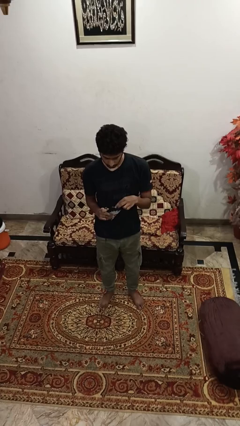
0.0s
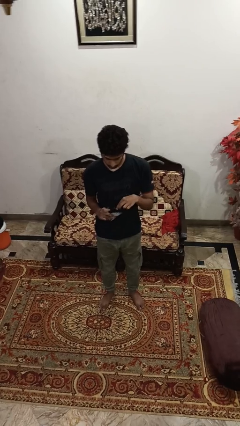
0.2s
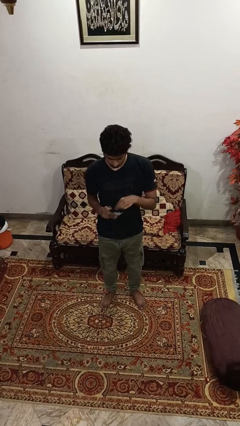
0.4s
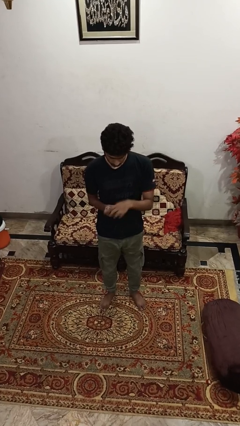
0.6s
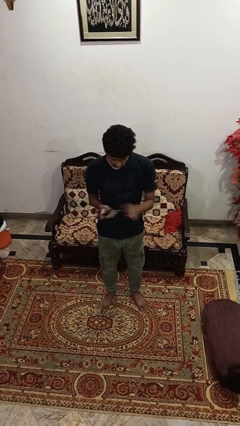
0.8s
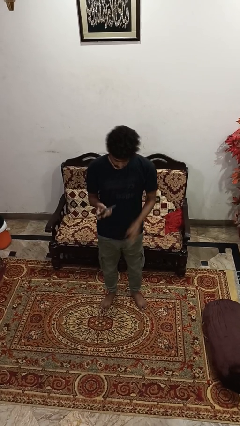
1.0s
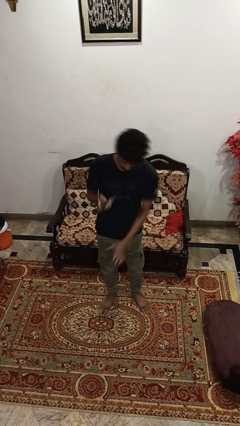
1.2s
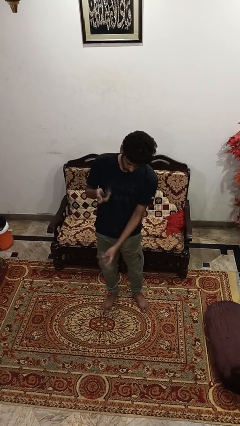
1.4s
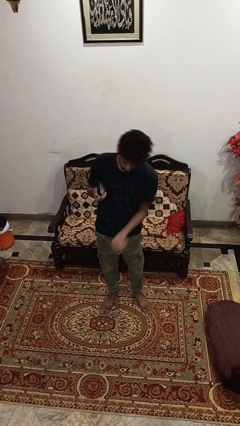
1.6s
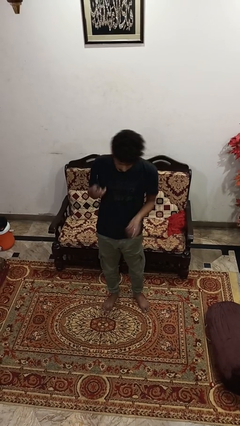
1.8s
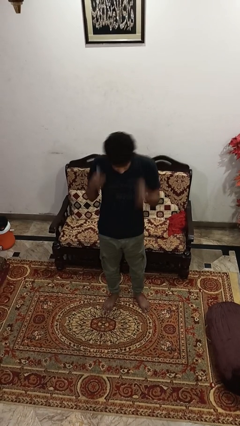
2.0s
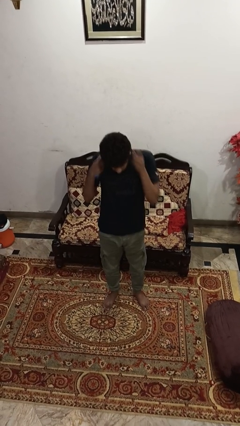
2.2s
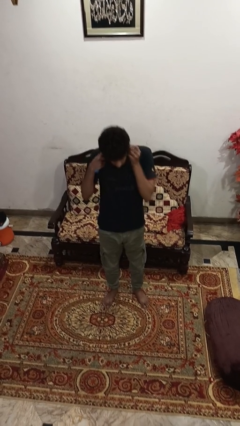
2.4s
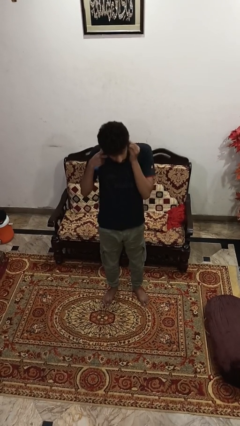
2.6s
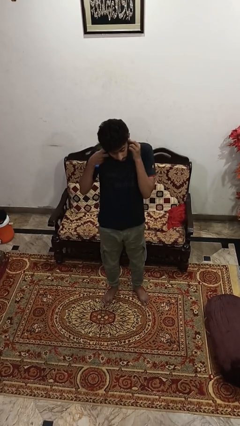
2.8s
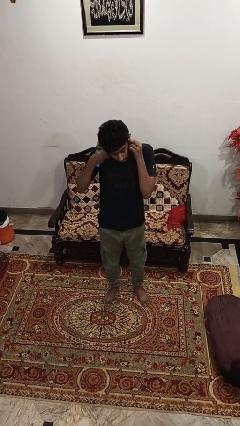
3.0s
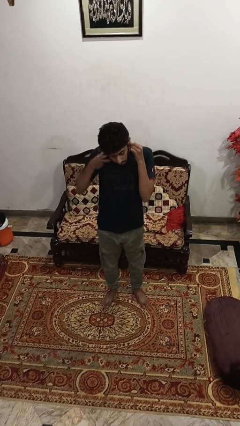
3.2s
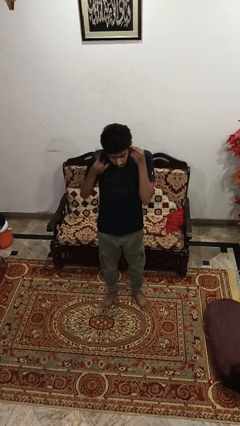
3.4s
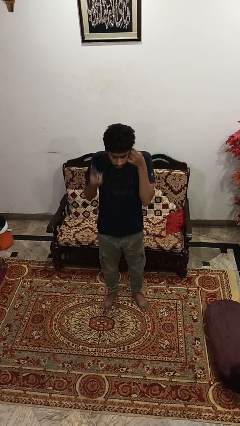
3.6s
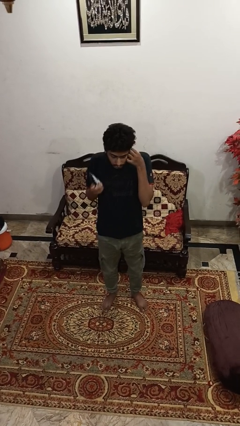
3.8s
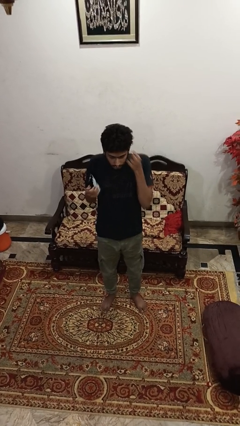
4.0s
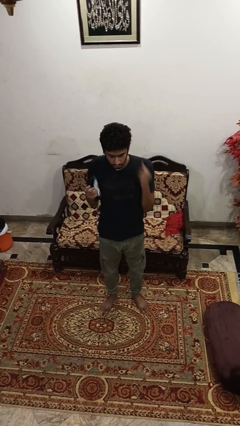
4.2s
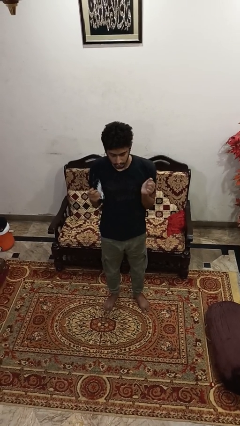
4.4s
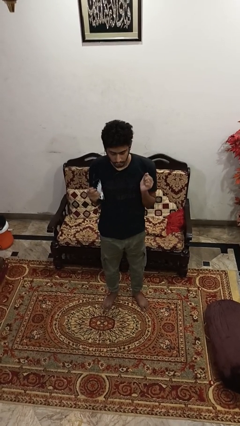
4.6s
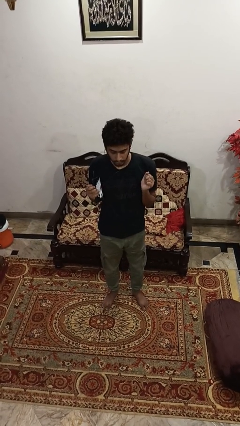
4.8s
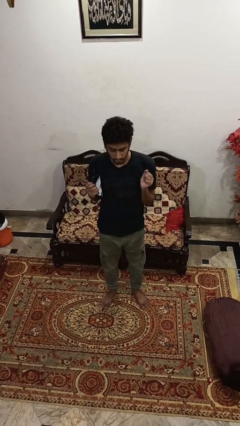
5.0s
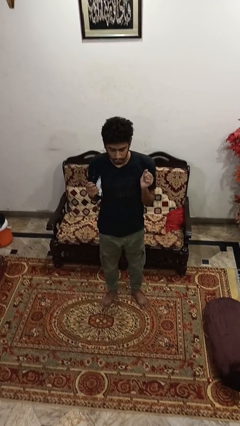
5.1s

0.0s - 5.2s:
person puts on headphones

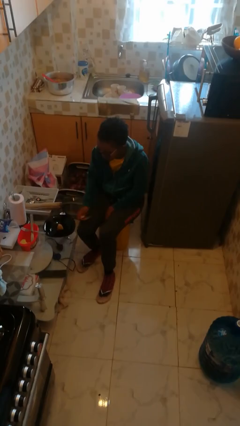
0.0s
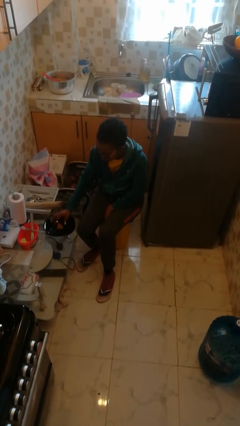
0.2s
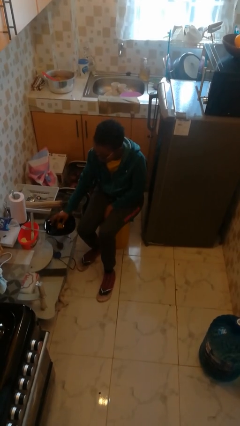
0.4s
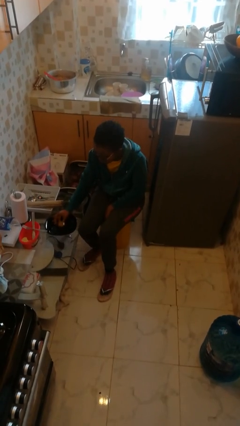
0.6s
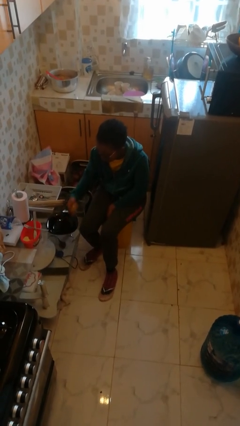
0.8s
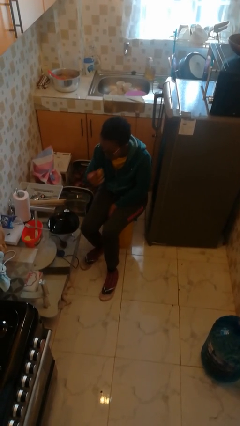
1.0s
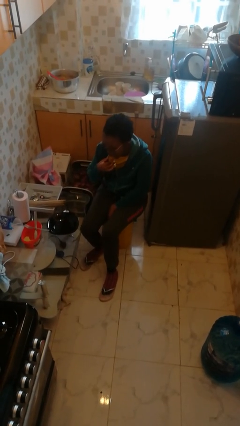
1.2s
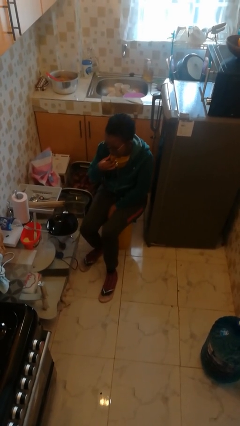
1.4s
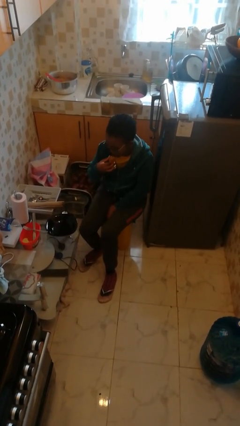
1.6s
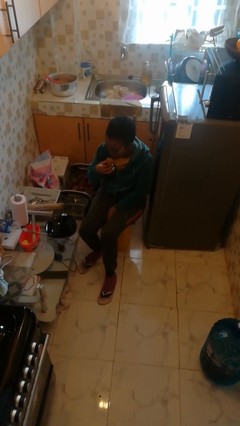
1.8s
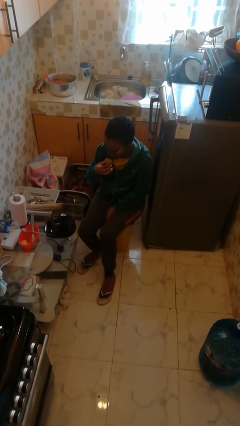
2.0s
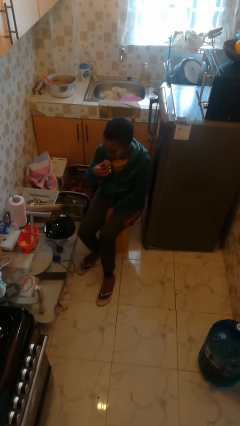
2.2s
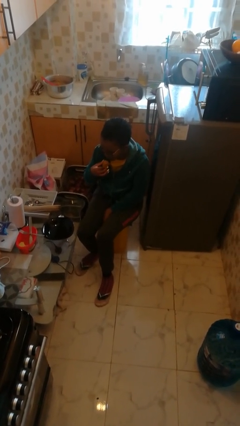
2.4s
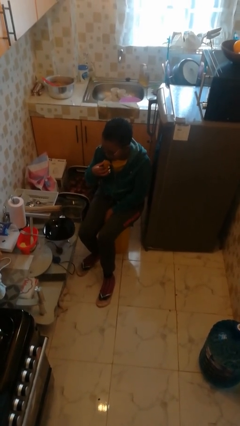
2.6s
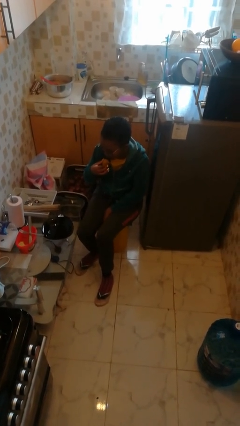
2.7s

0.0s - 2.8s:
person eats with hands

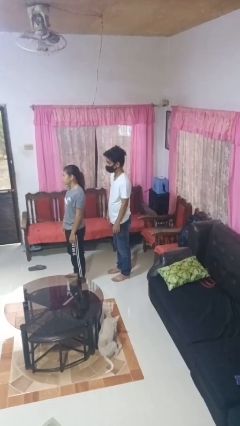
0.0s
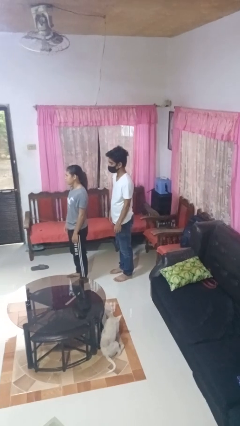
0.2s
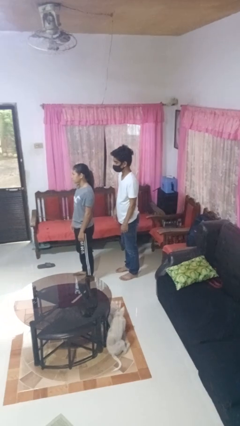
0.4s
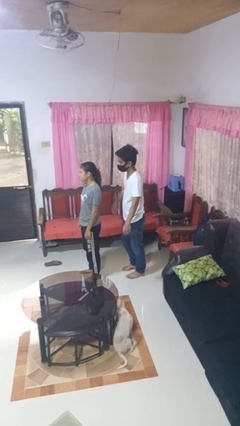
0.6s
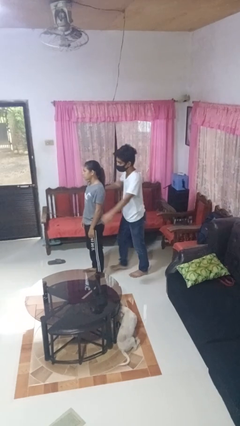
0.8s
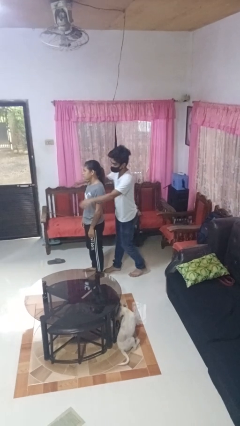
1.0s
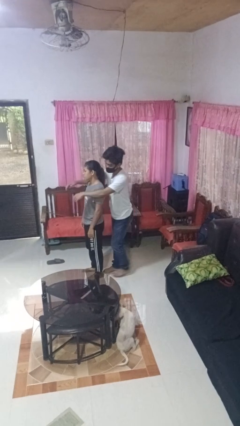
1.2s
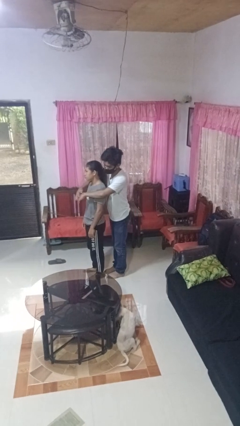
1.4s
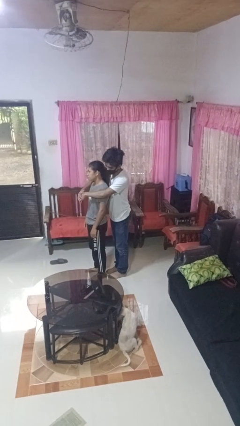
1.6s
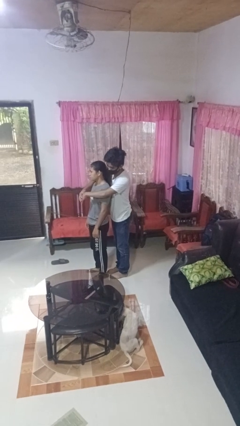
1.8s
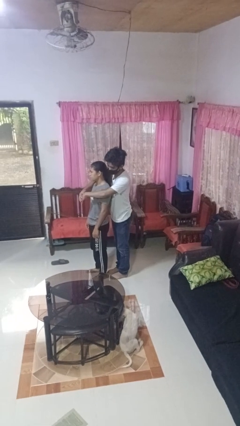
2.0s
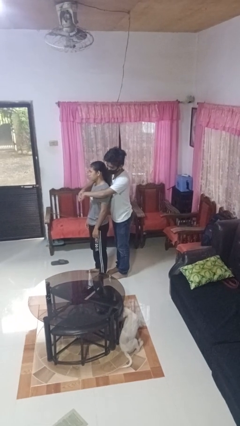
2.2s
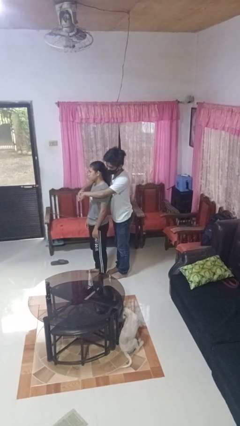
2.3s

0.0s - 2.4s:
person hugs person from behind

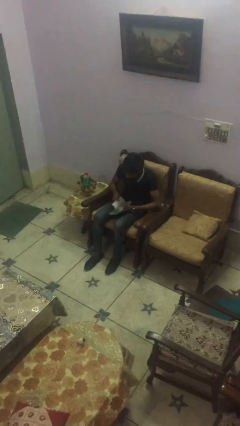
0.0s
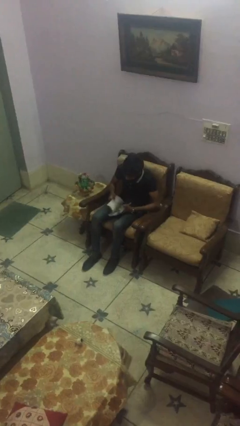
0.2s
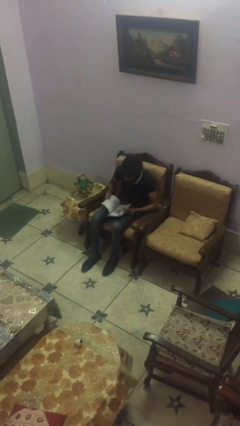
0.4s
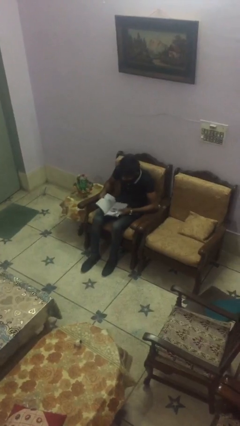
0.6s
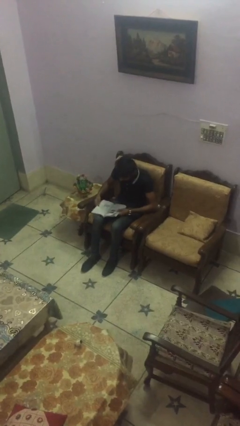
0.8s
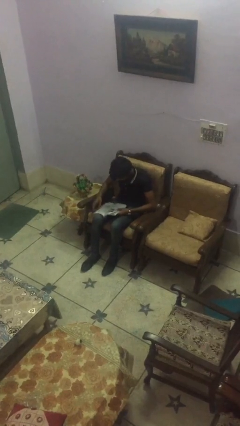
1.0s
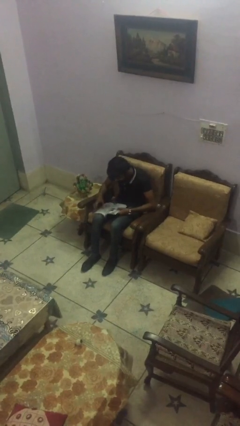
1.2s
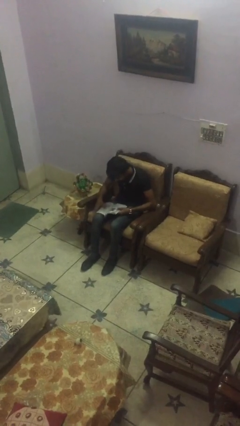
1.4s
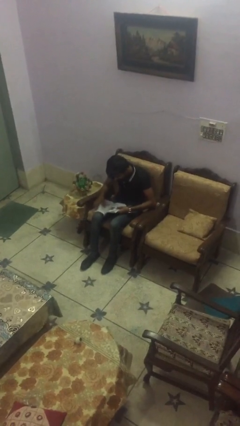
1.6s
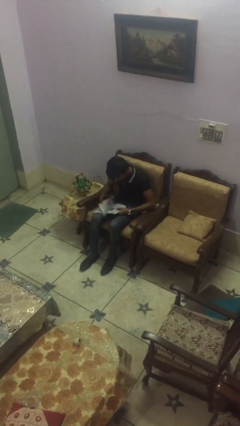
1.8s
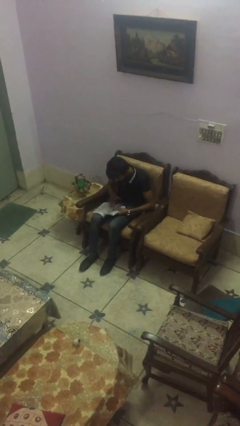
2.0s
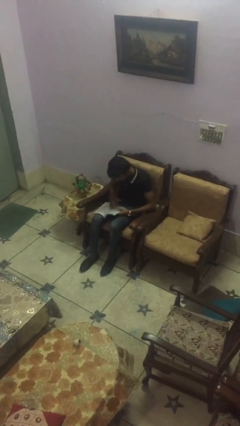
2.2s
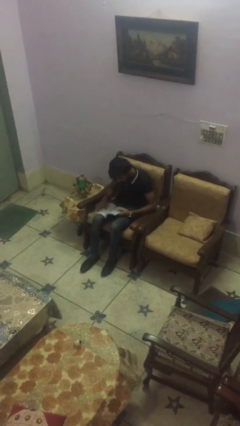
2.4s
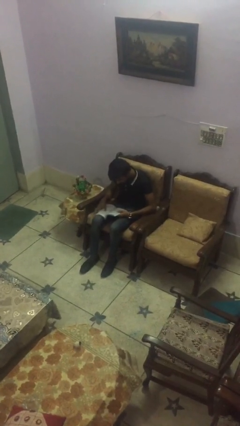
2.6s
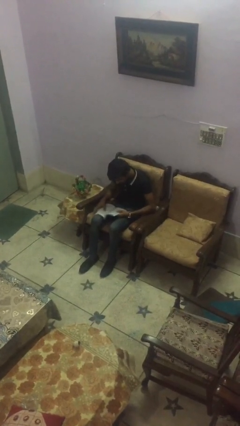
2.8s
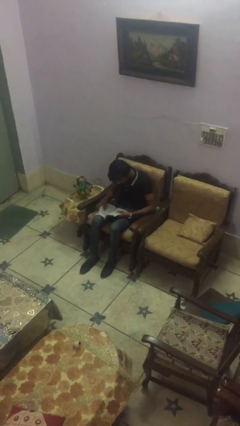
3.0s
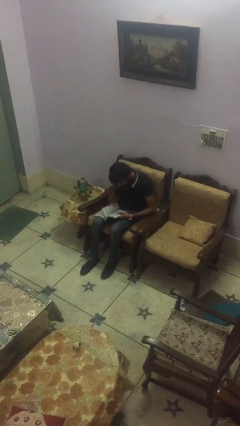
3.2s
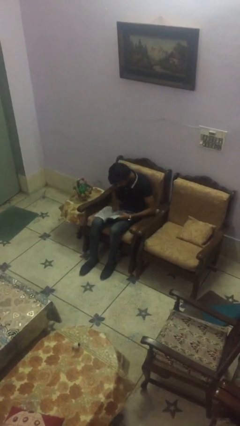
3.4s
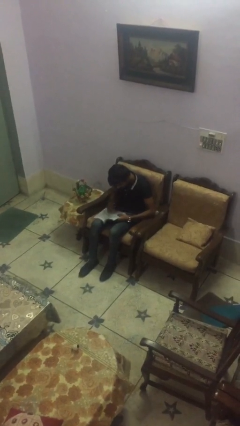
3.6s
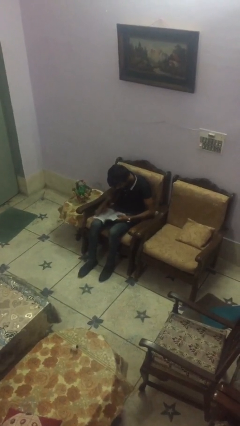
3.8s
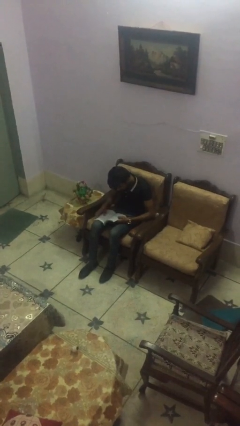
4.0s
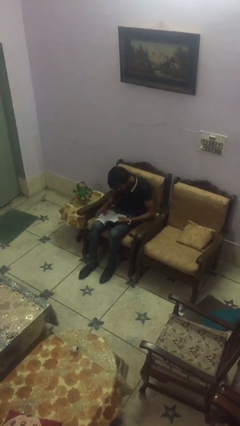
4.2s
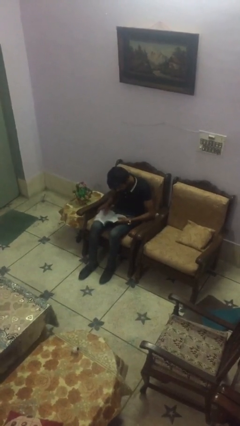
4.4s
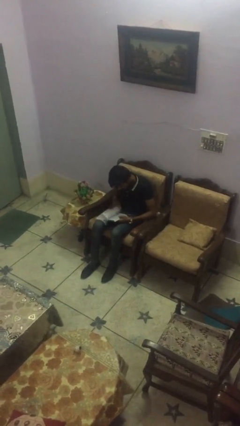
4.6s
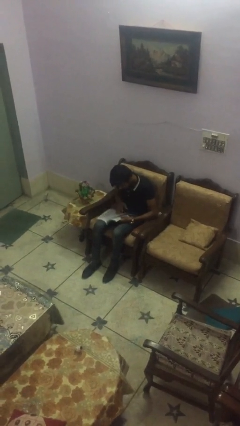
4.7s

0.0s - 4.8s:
person reads document

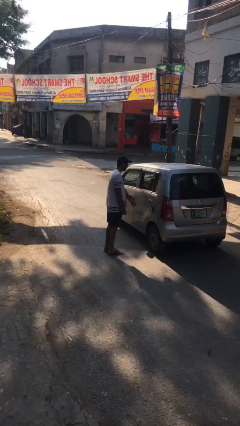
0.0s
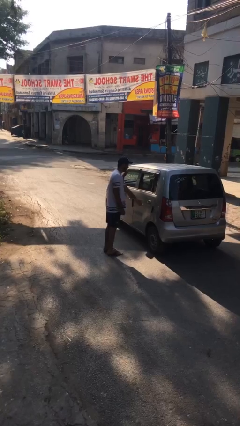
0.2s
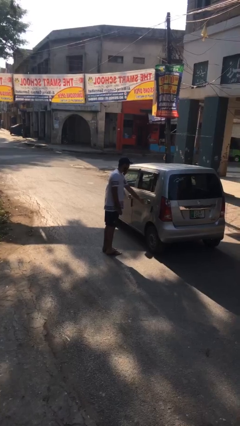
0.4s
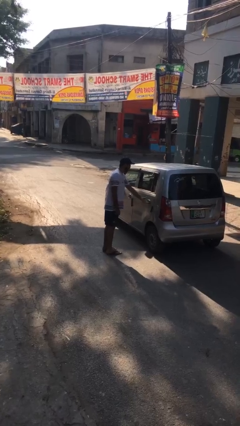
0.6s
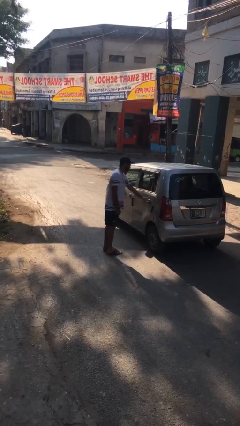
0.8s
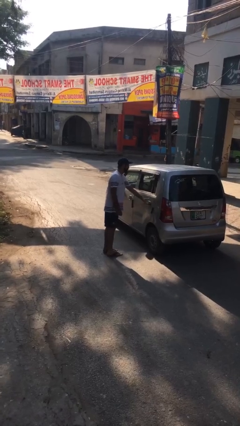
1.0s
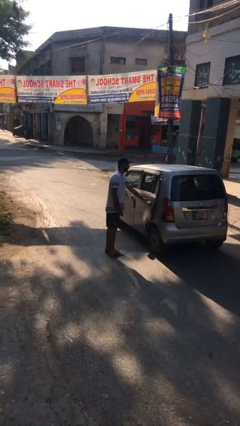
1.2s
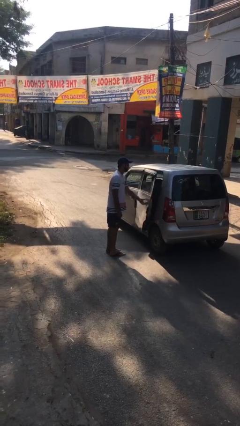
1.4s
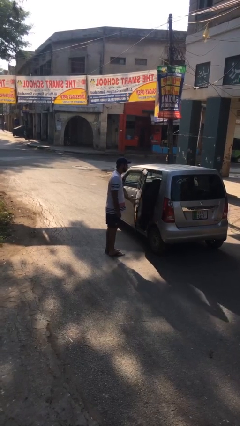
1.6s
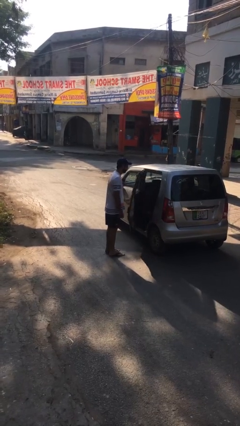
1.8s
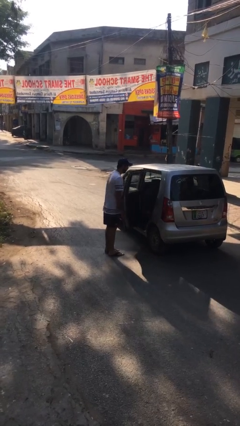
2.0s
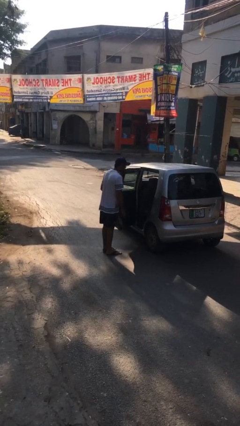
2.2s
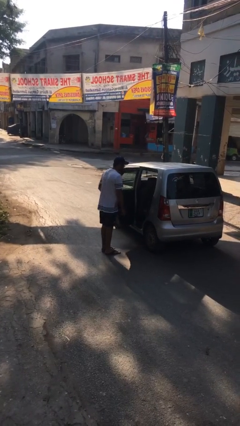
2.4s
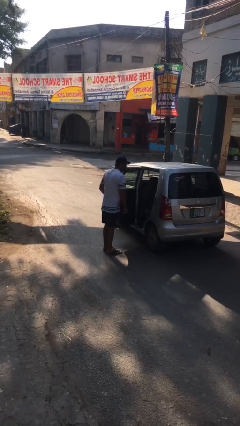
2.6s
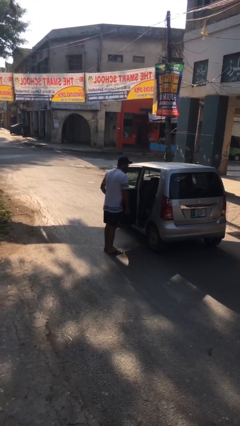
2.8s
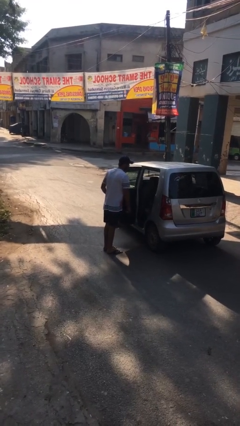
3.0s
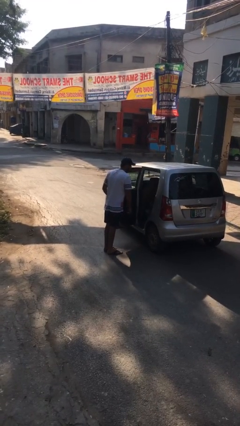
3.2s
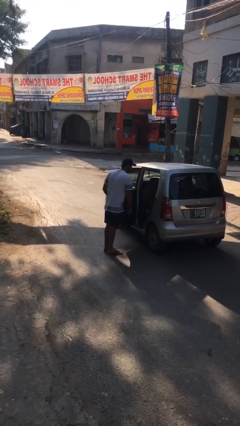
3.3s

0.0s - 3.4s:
person opens car door
